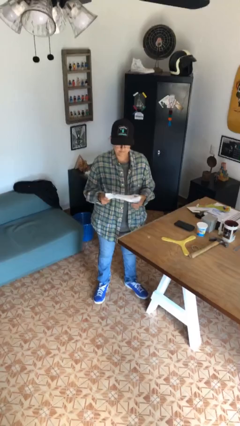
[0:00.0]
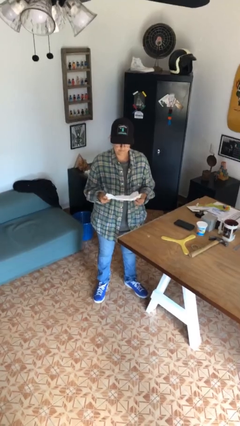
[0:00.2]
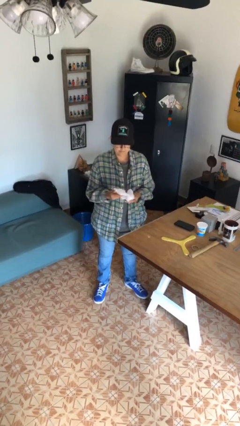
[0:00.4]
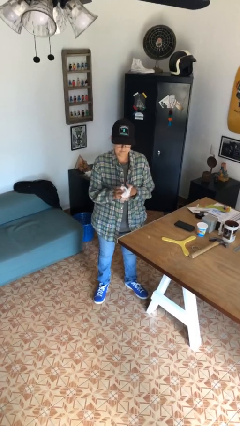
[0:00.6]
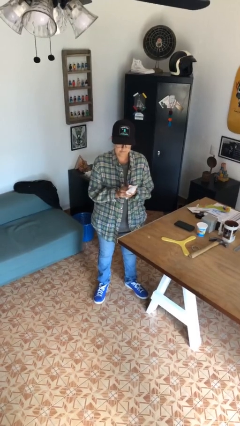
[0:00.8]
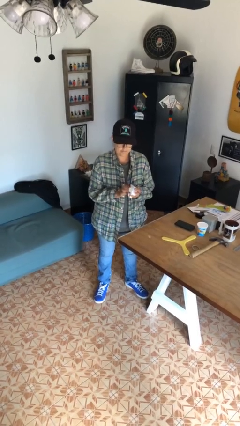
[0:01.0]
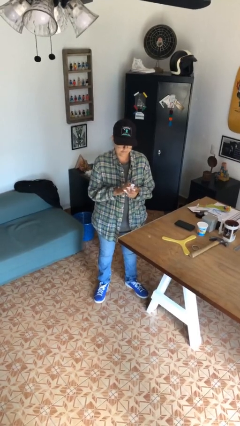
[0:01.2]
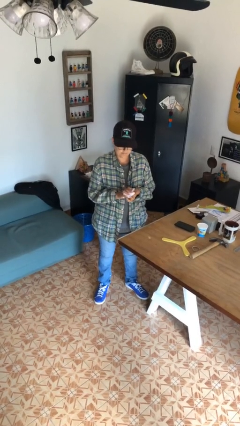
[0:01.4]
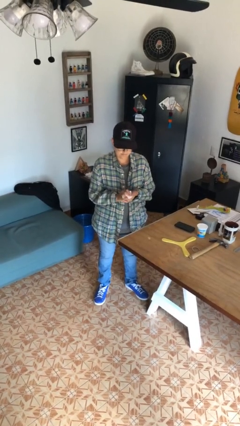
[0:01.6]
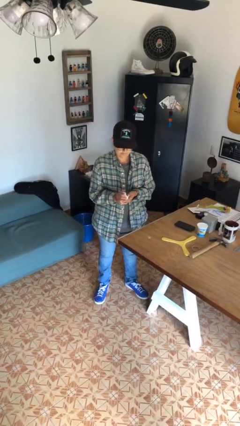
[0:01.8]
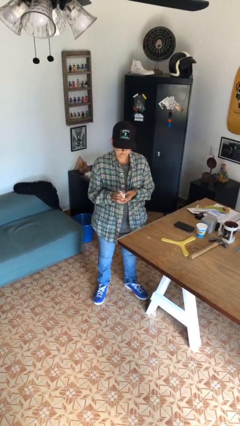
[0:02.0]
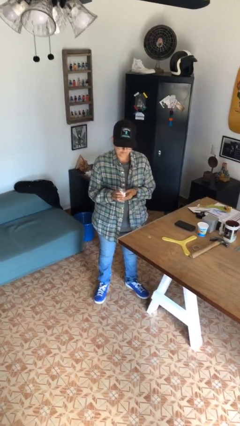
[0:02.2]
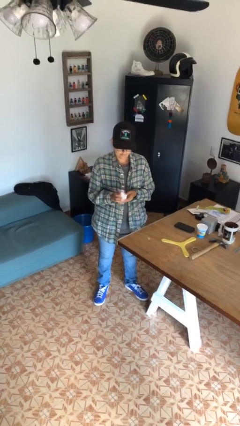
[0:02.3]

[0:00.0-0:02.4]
person crumples paper

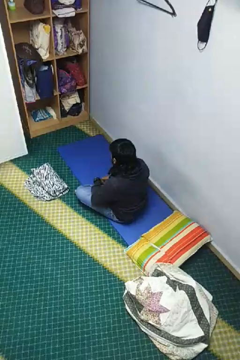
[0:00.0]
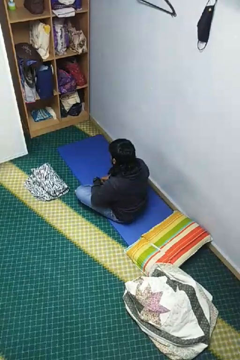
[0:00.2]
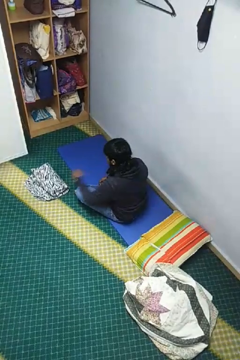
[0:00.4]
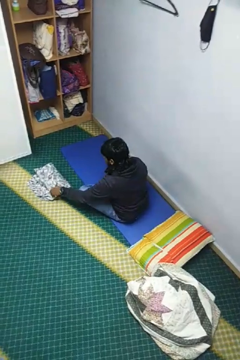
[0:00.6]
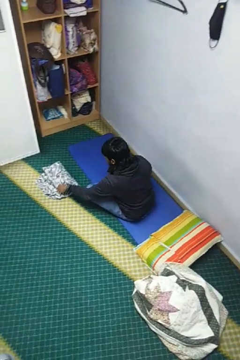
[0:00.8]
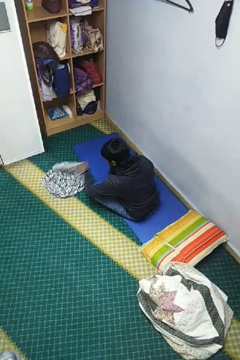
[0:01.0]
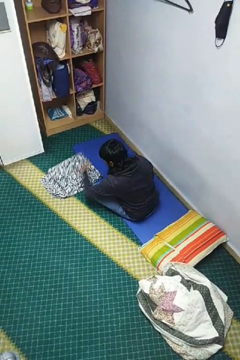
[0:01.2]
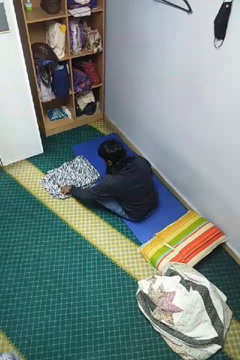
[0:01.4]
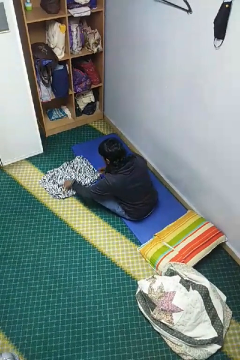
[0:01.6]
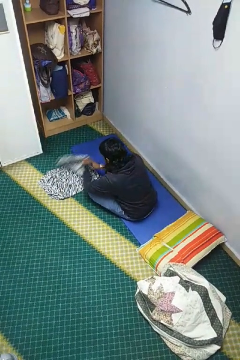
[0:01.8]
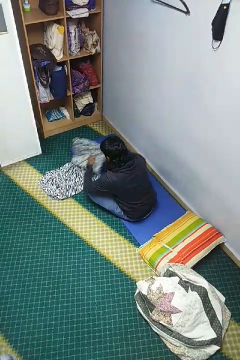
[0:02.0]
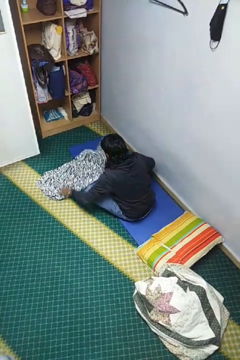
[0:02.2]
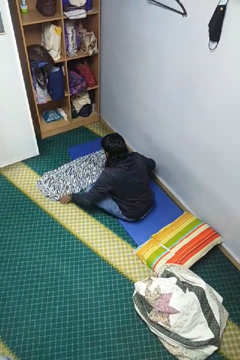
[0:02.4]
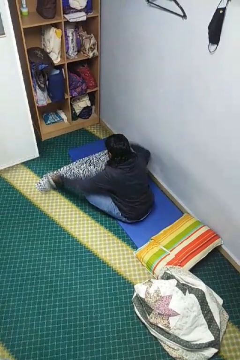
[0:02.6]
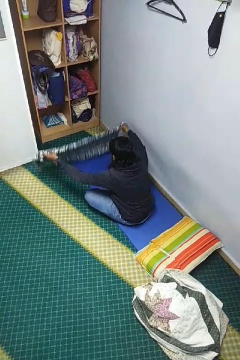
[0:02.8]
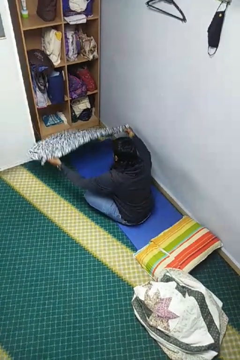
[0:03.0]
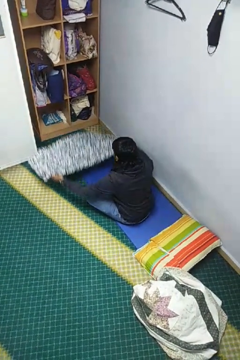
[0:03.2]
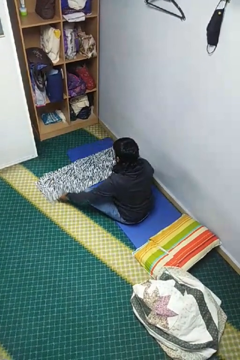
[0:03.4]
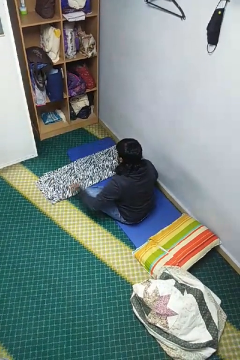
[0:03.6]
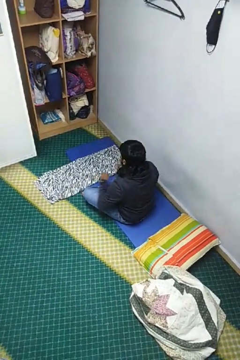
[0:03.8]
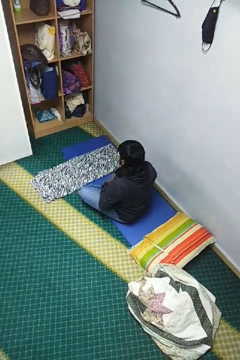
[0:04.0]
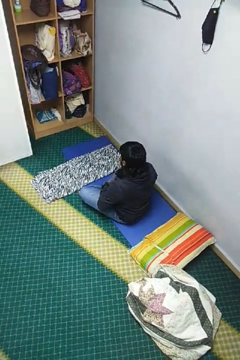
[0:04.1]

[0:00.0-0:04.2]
person unfolds blanket

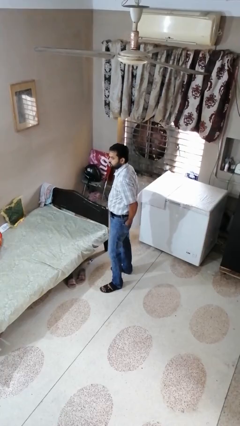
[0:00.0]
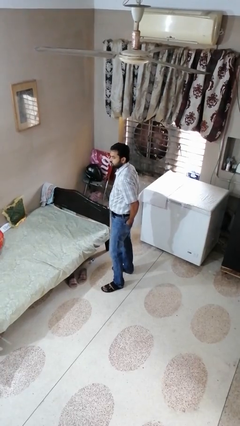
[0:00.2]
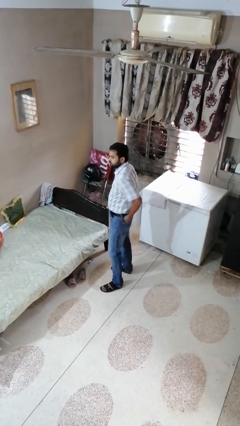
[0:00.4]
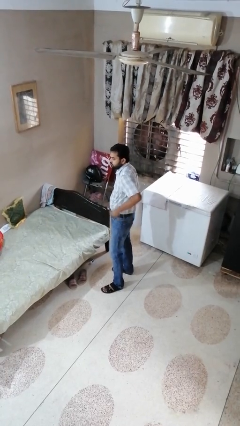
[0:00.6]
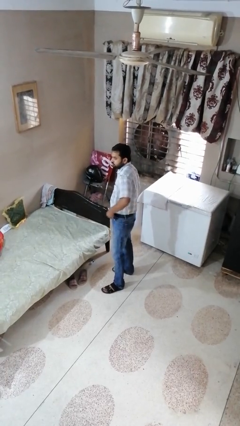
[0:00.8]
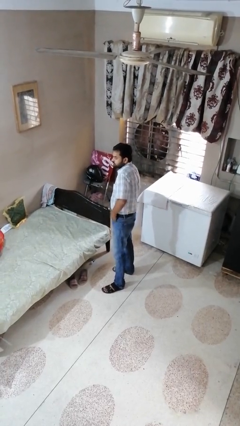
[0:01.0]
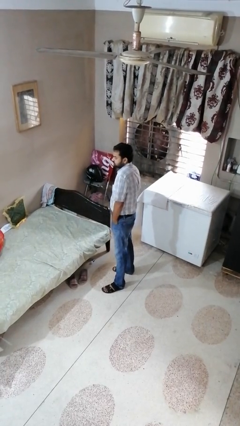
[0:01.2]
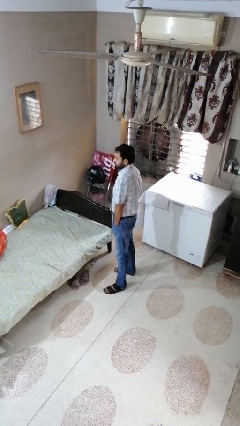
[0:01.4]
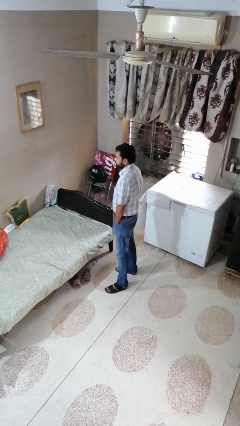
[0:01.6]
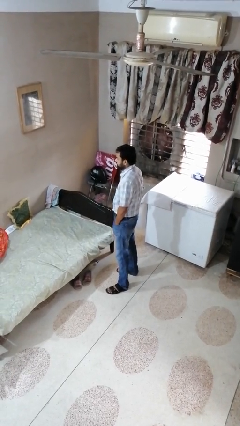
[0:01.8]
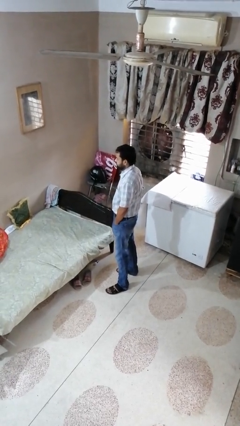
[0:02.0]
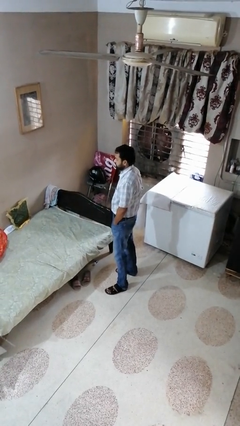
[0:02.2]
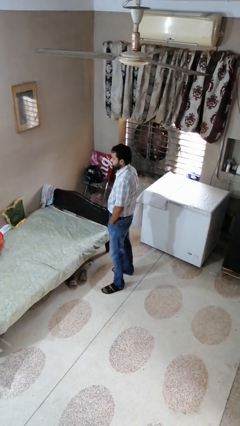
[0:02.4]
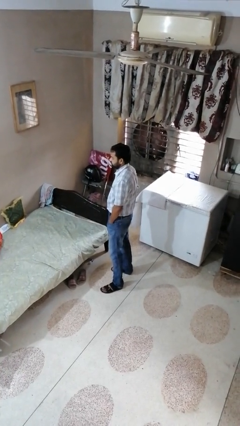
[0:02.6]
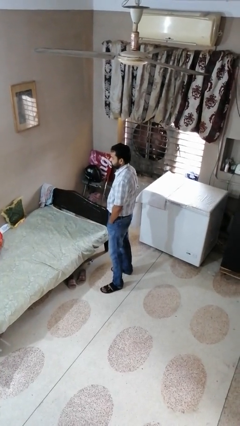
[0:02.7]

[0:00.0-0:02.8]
person puts hands in back pockets

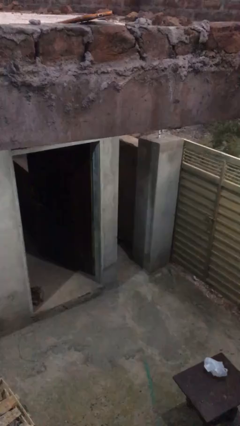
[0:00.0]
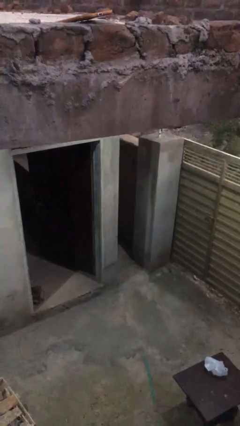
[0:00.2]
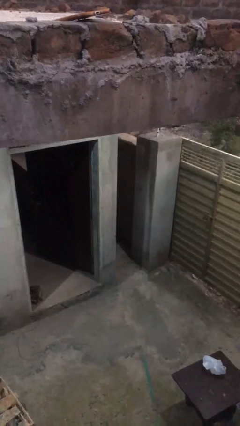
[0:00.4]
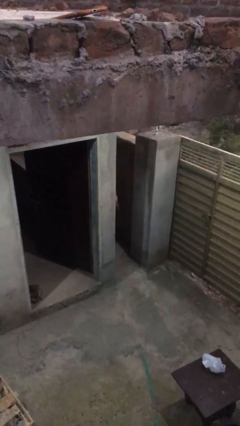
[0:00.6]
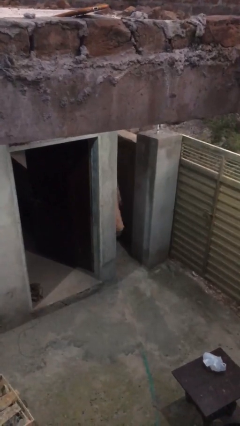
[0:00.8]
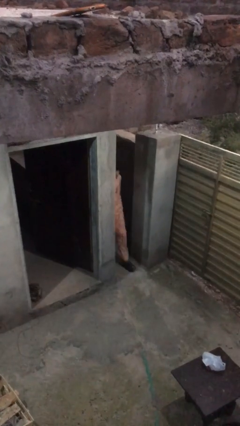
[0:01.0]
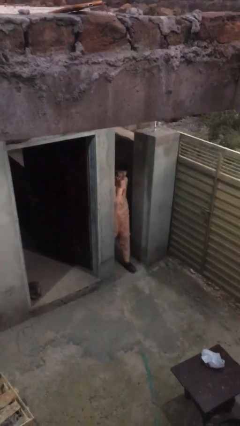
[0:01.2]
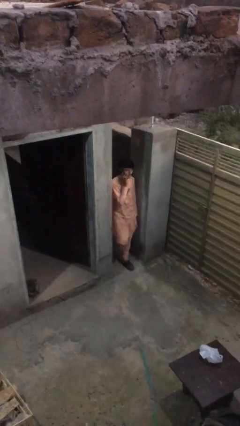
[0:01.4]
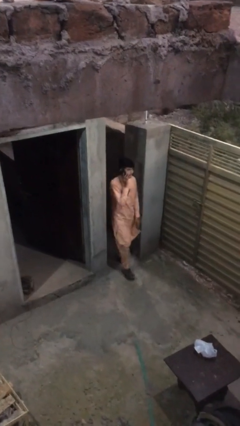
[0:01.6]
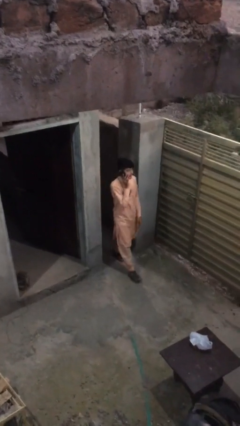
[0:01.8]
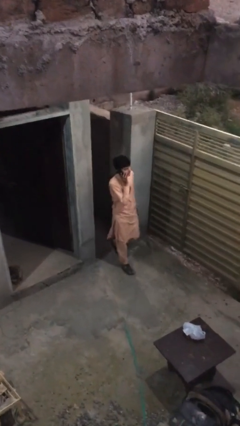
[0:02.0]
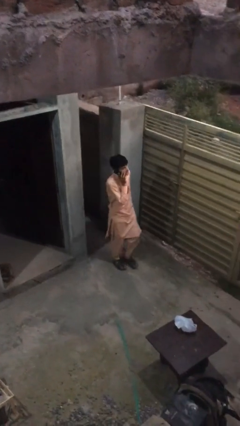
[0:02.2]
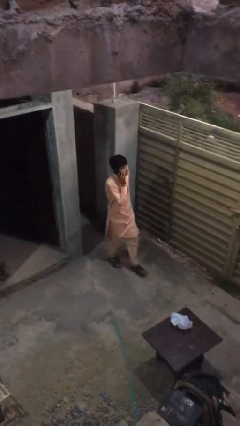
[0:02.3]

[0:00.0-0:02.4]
person enters scene through structure

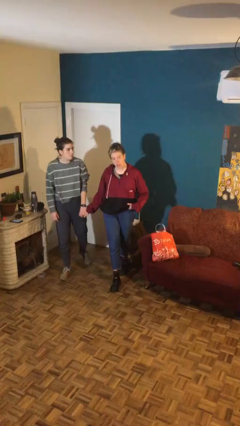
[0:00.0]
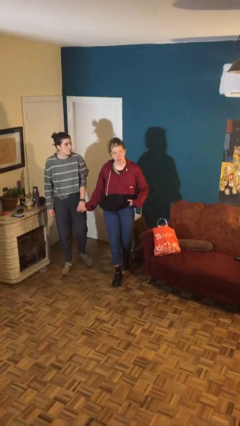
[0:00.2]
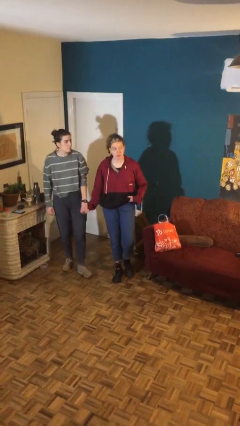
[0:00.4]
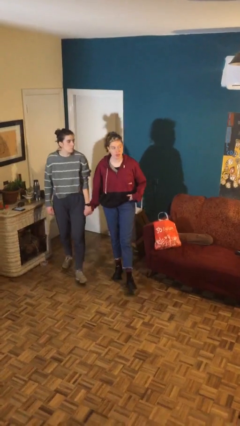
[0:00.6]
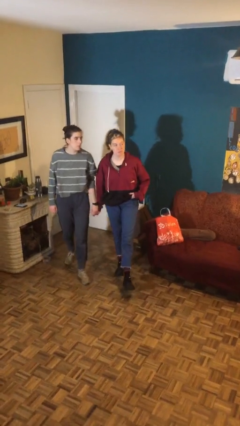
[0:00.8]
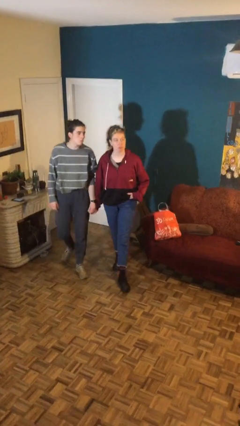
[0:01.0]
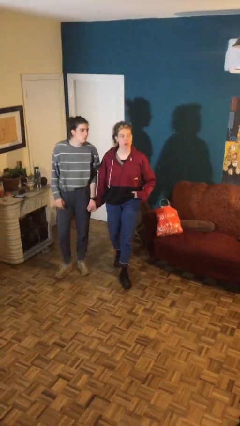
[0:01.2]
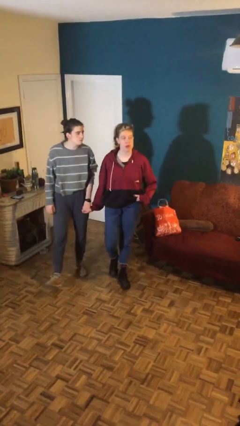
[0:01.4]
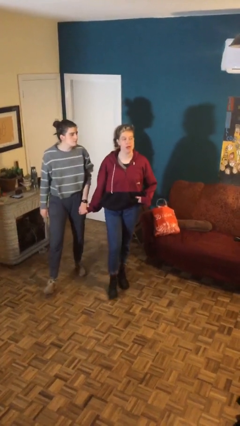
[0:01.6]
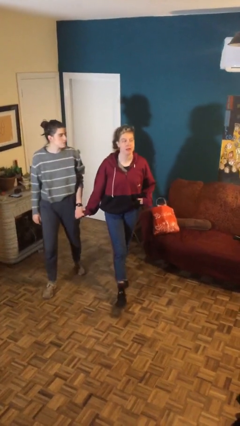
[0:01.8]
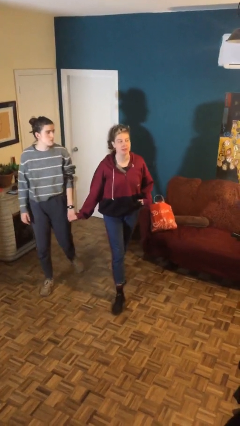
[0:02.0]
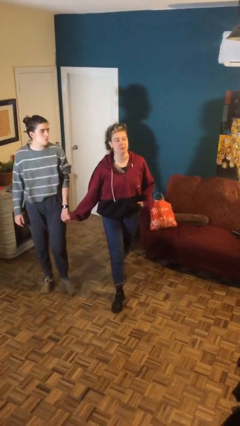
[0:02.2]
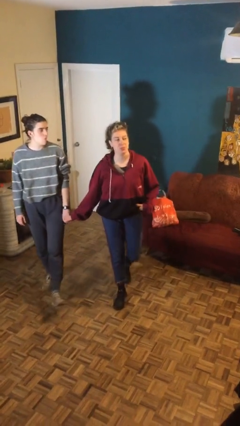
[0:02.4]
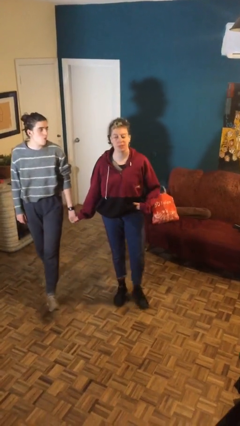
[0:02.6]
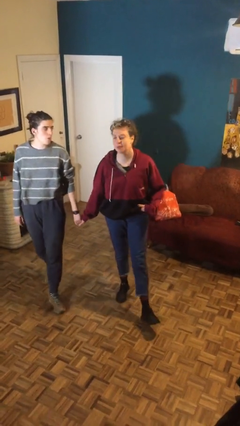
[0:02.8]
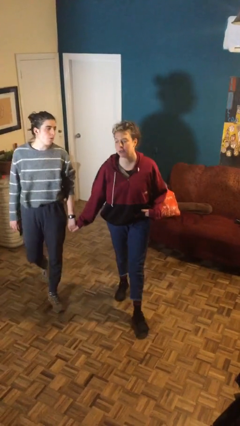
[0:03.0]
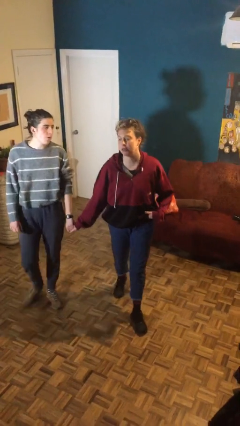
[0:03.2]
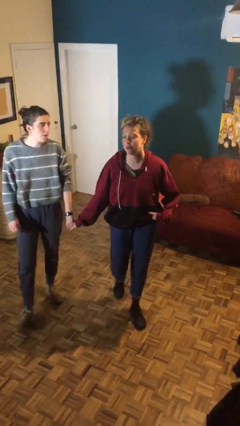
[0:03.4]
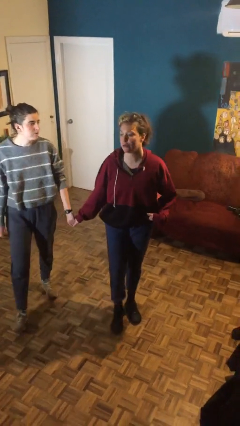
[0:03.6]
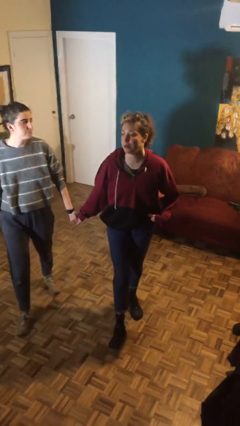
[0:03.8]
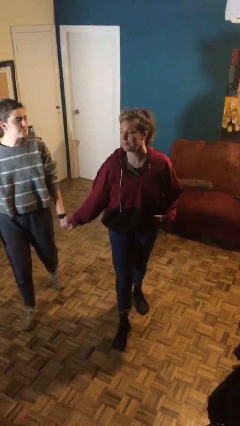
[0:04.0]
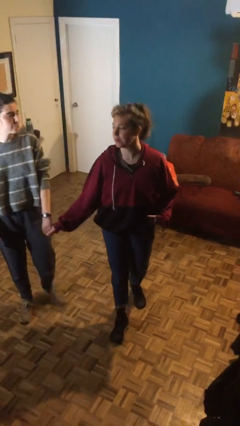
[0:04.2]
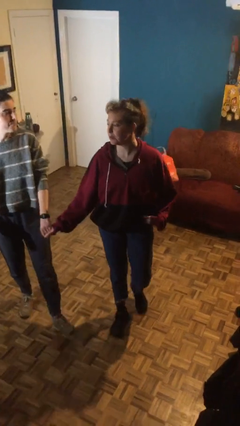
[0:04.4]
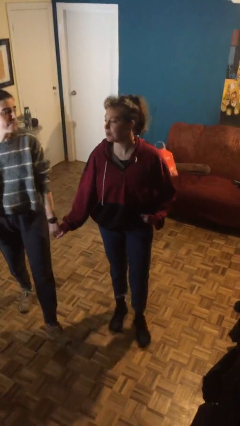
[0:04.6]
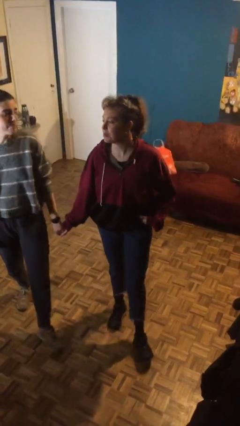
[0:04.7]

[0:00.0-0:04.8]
person holds hand

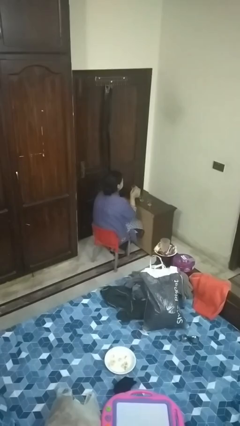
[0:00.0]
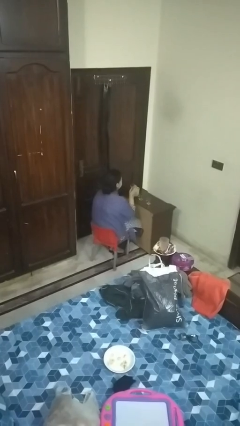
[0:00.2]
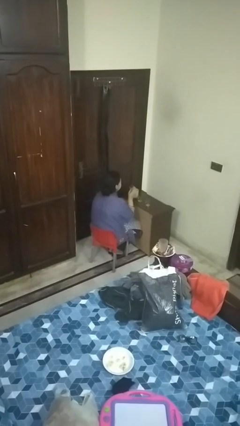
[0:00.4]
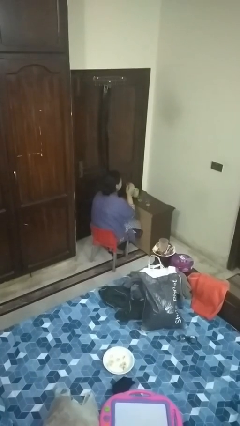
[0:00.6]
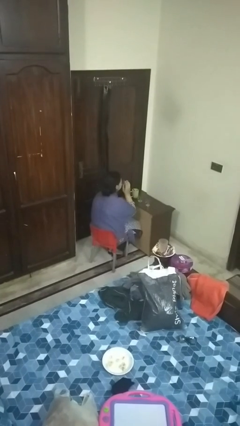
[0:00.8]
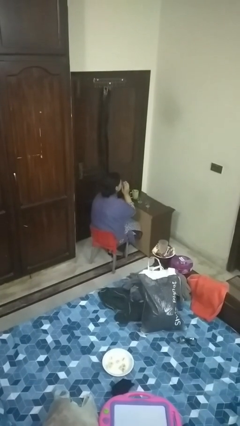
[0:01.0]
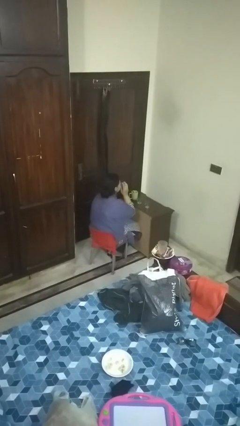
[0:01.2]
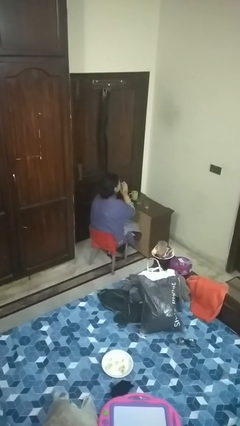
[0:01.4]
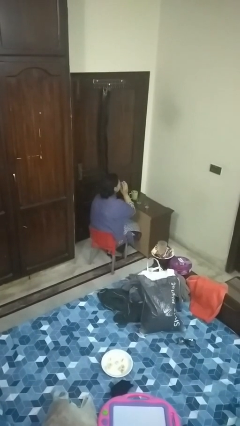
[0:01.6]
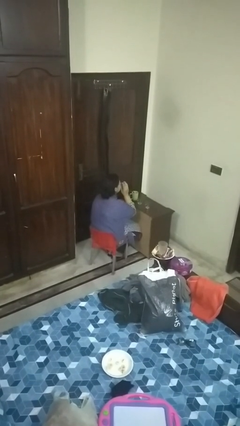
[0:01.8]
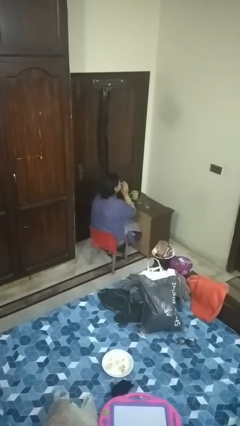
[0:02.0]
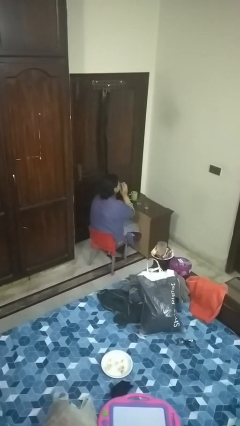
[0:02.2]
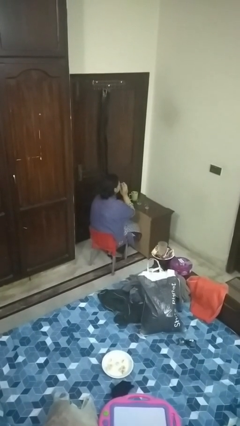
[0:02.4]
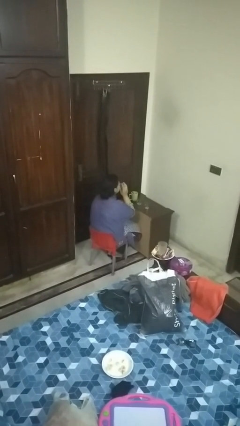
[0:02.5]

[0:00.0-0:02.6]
person drinks from shotglass
